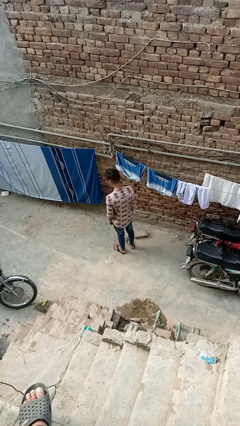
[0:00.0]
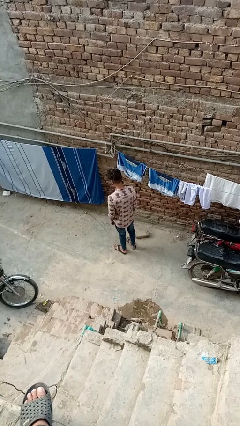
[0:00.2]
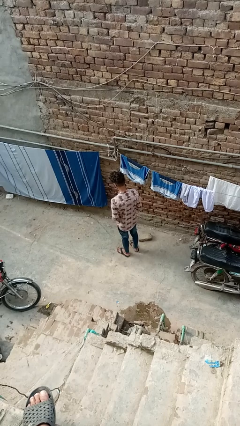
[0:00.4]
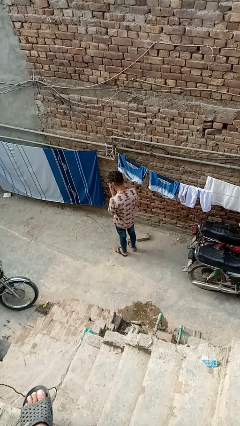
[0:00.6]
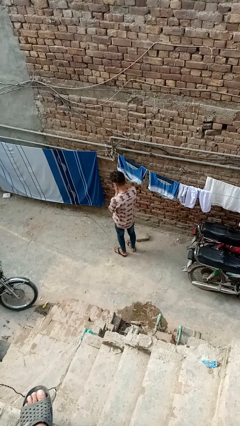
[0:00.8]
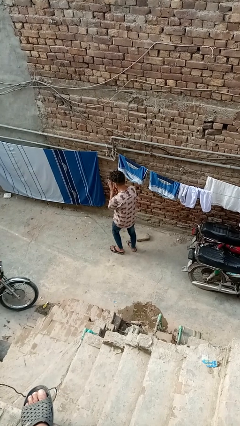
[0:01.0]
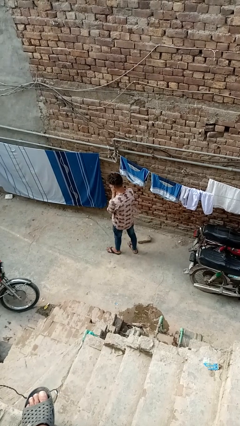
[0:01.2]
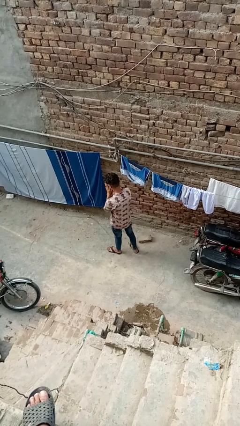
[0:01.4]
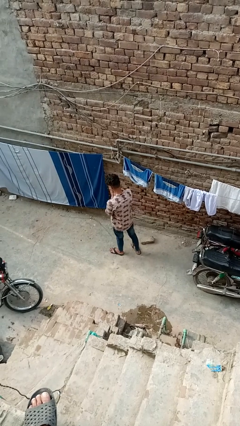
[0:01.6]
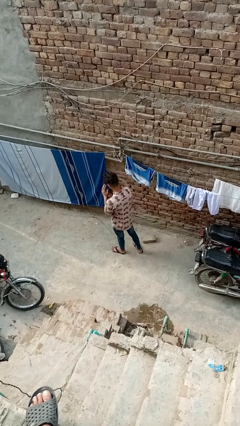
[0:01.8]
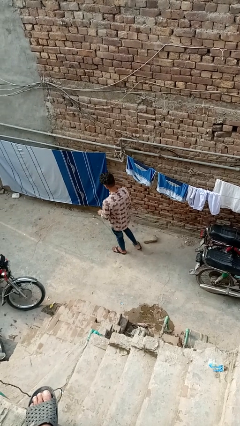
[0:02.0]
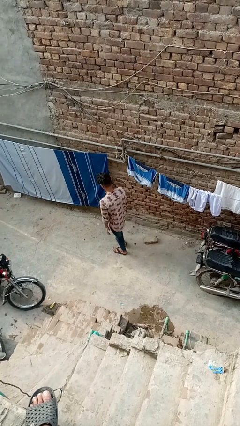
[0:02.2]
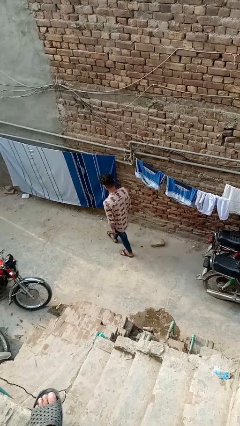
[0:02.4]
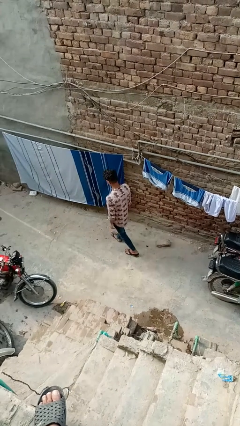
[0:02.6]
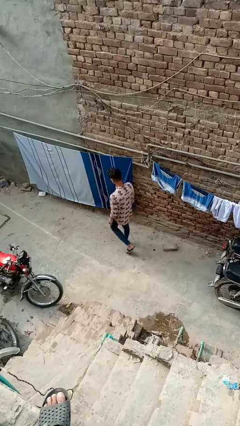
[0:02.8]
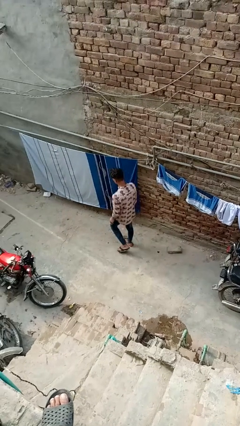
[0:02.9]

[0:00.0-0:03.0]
person blows into hands

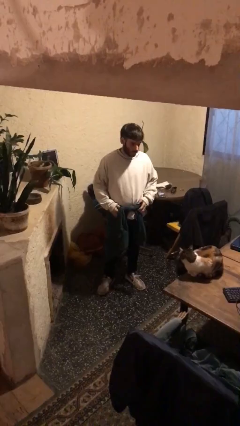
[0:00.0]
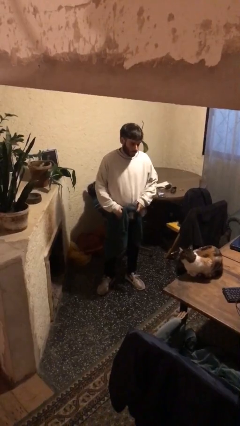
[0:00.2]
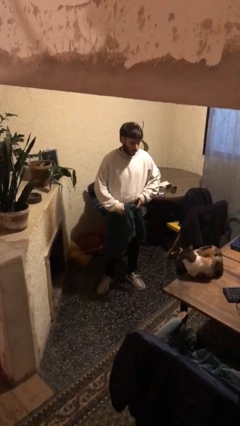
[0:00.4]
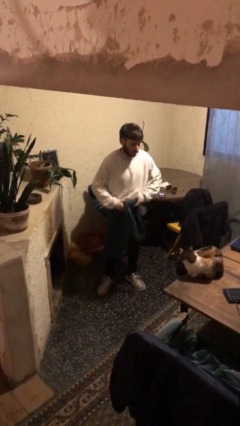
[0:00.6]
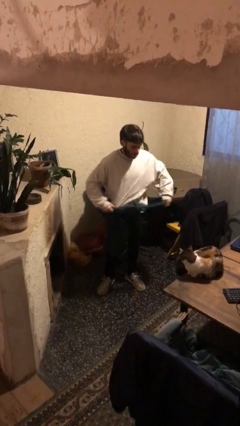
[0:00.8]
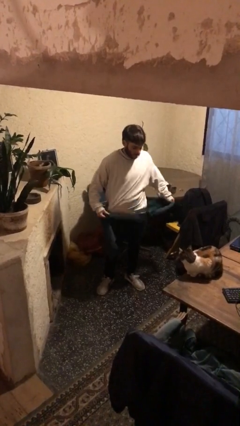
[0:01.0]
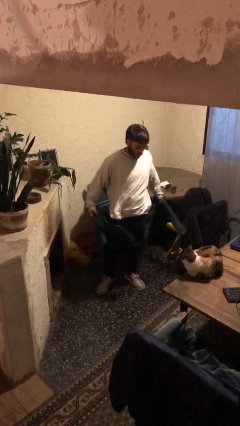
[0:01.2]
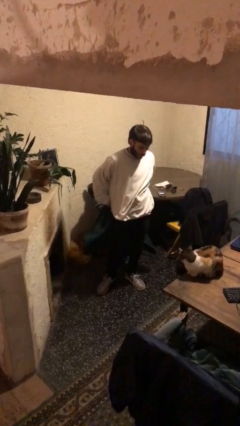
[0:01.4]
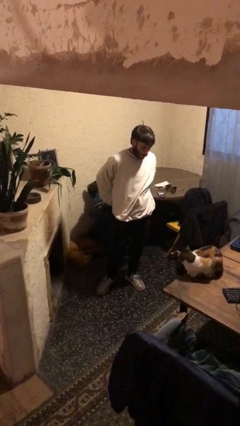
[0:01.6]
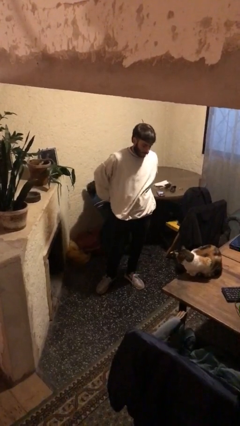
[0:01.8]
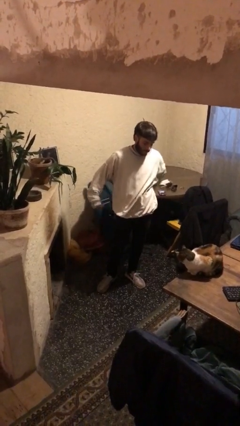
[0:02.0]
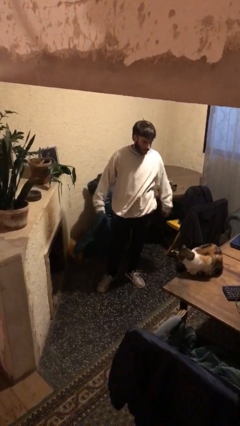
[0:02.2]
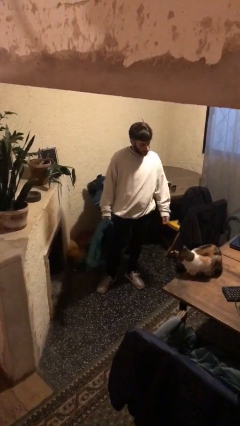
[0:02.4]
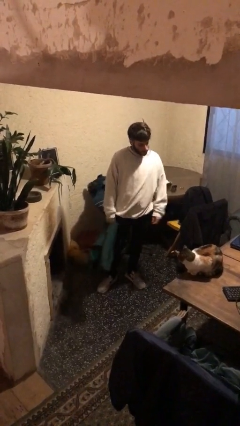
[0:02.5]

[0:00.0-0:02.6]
person unties jacket around waist

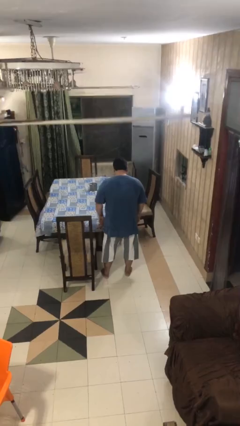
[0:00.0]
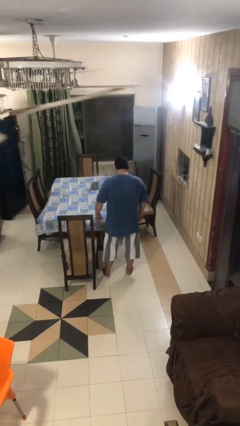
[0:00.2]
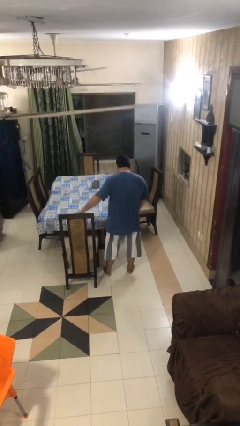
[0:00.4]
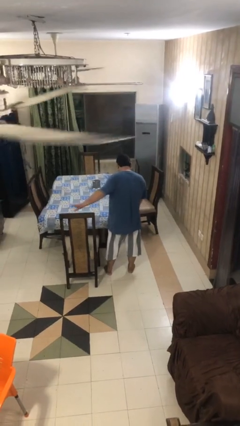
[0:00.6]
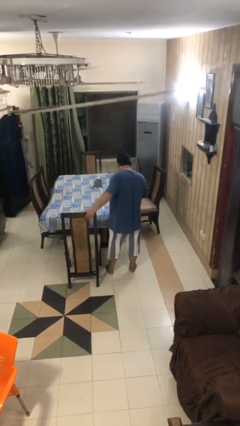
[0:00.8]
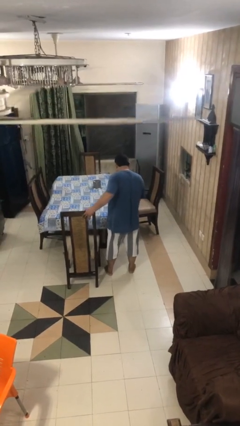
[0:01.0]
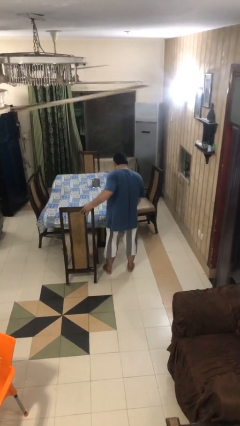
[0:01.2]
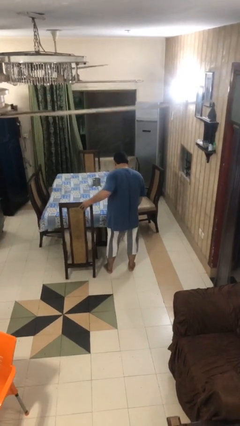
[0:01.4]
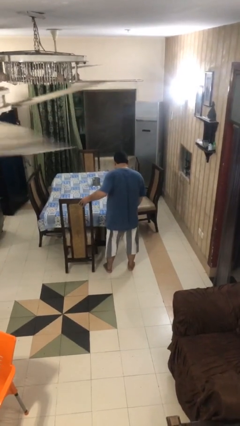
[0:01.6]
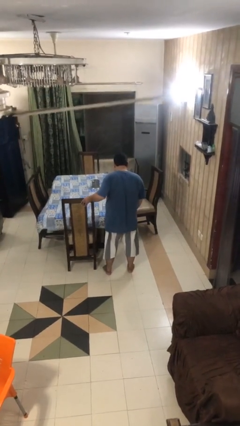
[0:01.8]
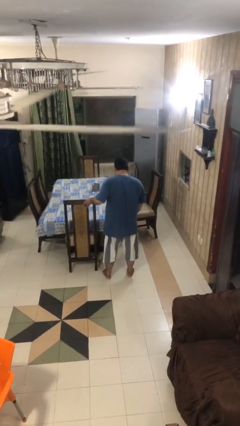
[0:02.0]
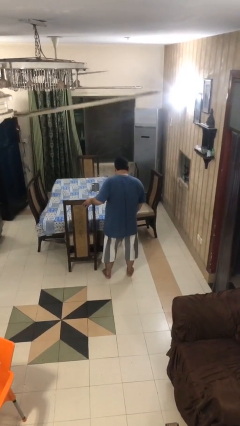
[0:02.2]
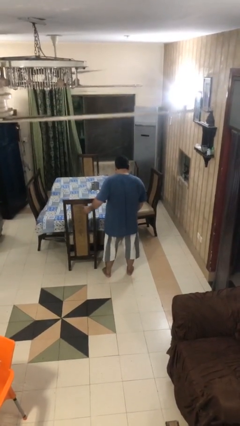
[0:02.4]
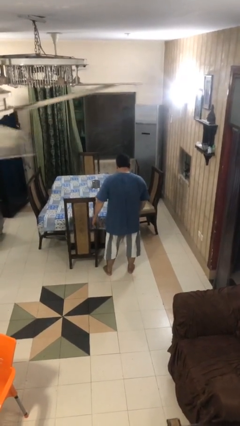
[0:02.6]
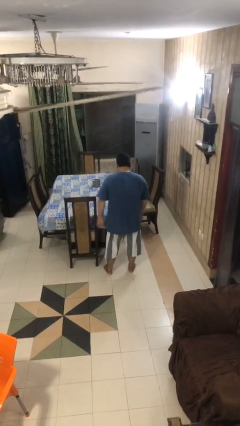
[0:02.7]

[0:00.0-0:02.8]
person pushes in chair

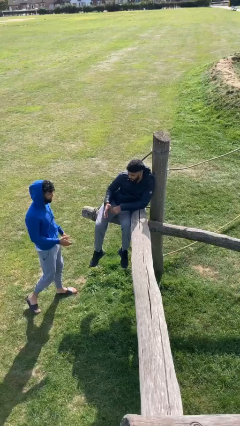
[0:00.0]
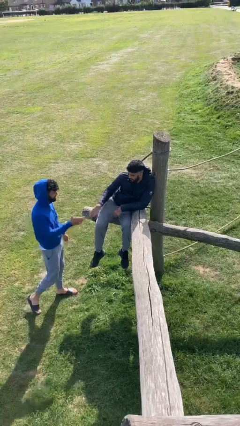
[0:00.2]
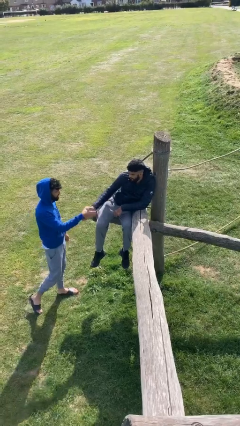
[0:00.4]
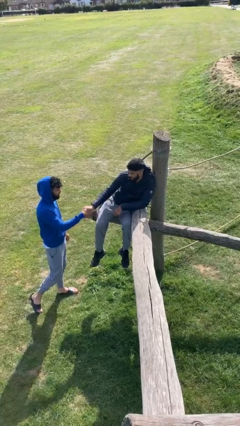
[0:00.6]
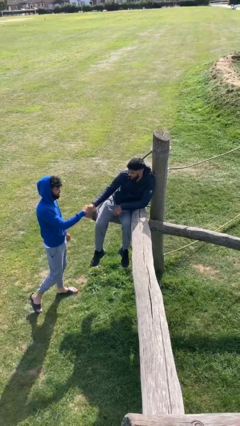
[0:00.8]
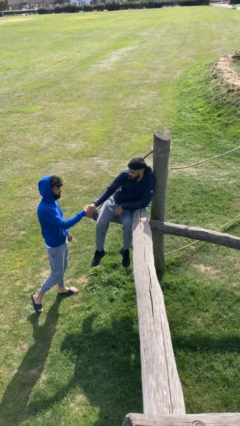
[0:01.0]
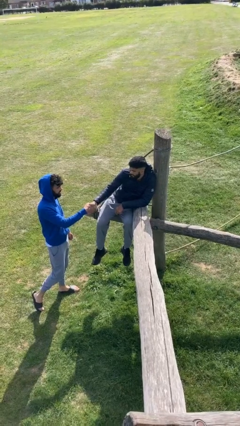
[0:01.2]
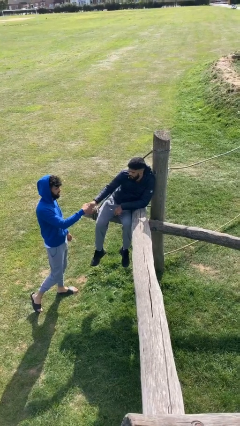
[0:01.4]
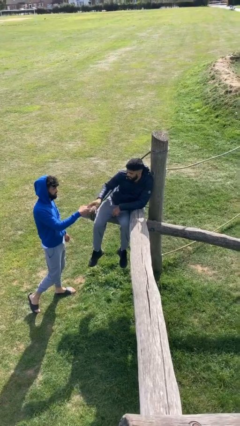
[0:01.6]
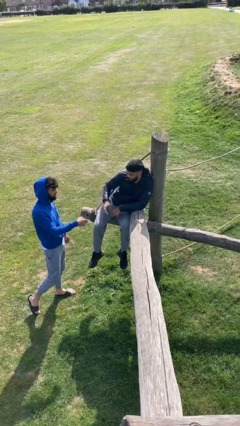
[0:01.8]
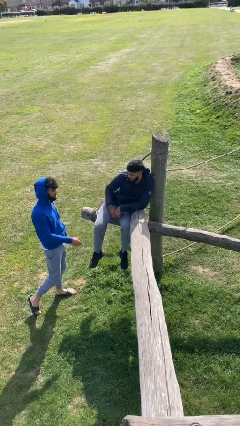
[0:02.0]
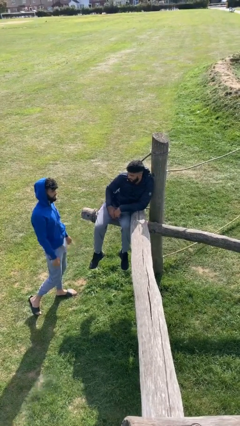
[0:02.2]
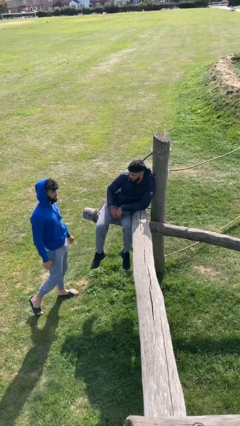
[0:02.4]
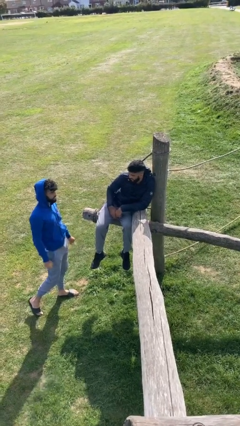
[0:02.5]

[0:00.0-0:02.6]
person shakes hand

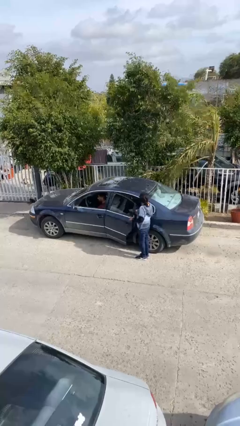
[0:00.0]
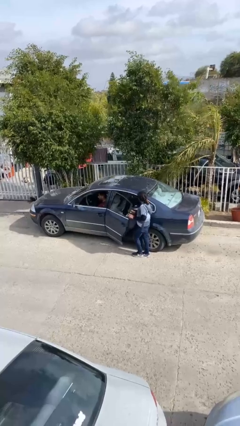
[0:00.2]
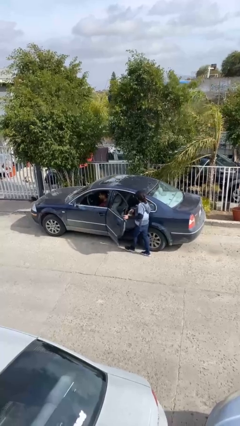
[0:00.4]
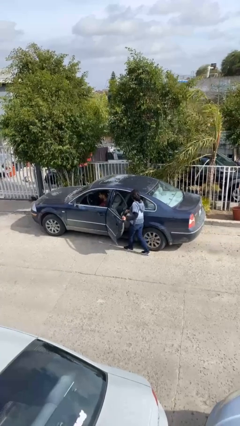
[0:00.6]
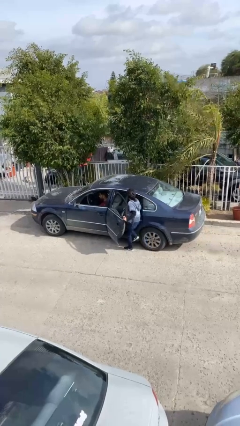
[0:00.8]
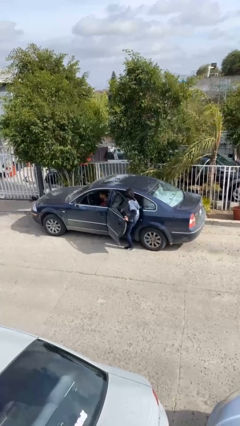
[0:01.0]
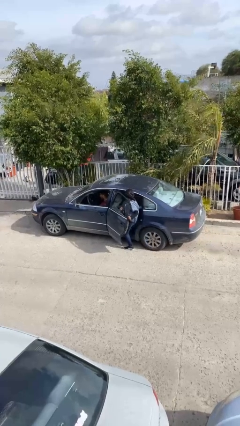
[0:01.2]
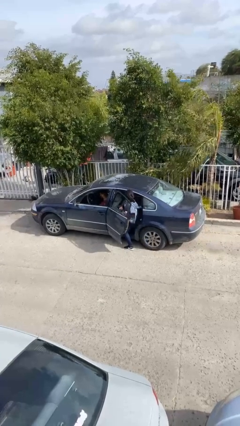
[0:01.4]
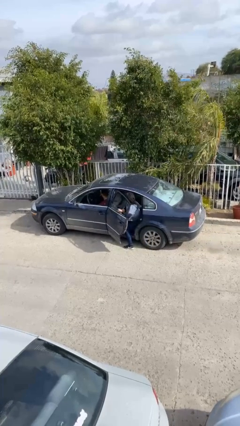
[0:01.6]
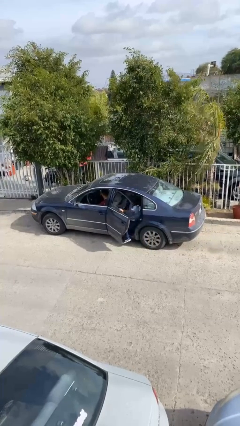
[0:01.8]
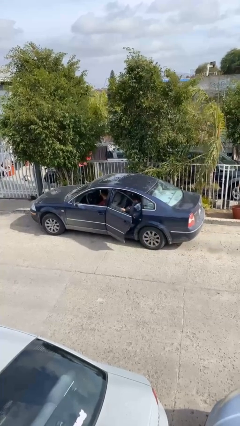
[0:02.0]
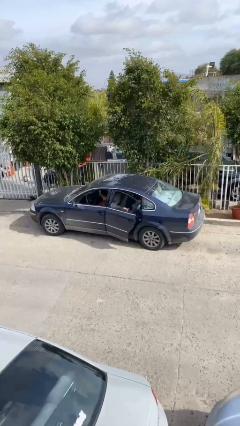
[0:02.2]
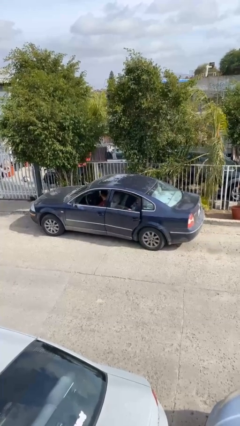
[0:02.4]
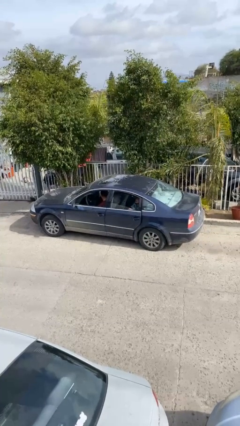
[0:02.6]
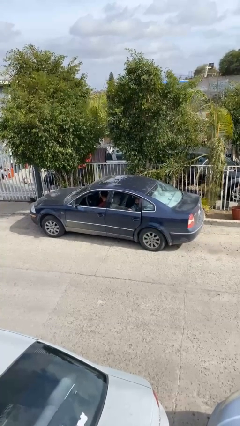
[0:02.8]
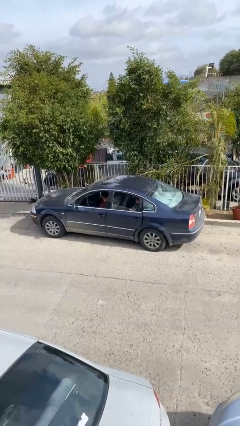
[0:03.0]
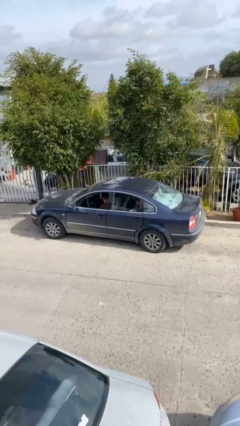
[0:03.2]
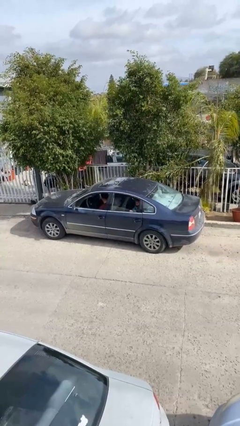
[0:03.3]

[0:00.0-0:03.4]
car picks up person

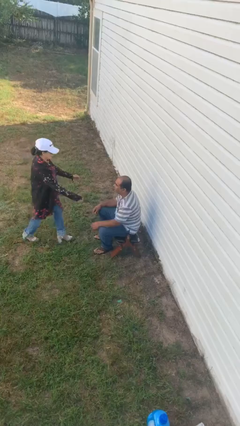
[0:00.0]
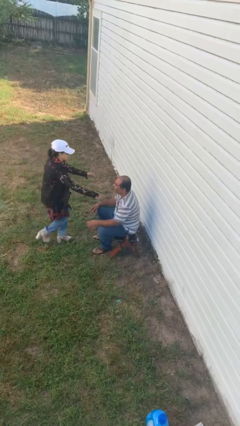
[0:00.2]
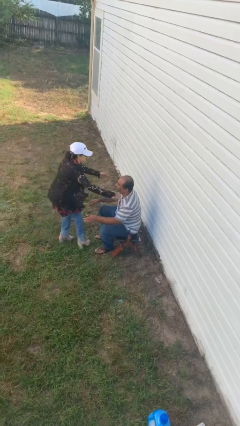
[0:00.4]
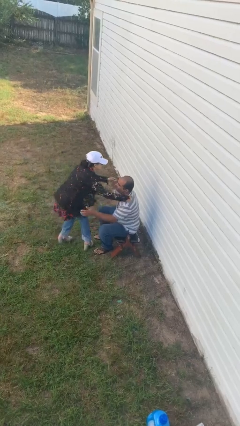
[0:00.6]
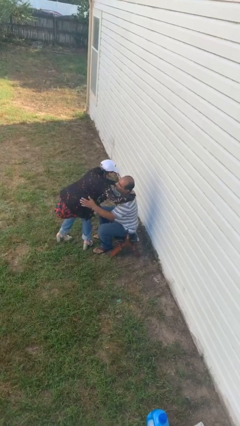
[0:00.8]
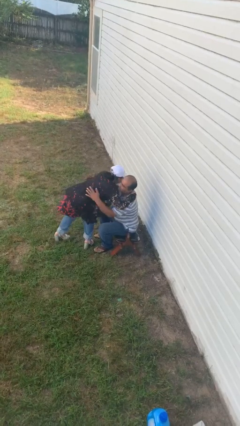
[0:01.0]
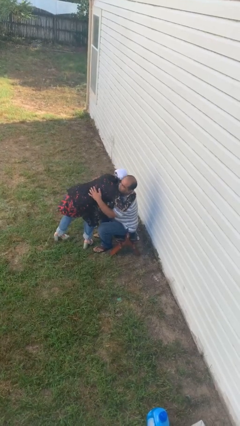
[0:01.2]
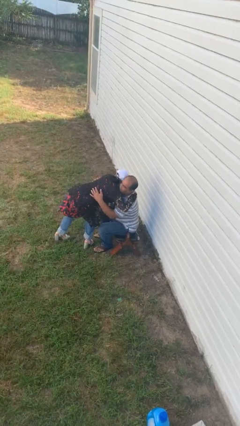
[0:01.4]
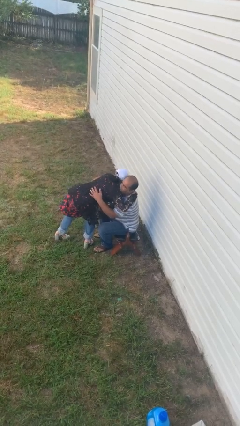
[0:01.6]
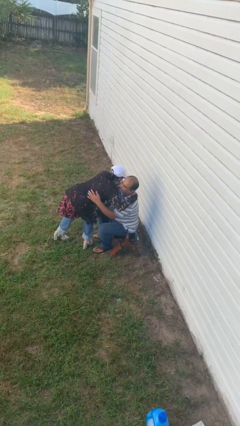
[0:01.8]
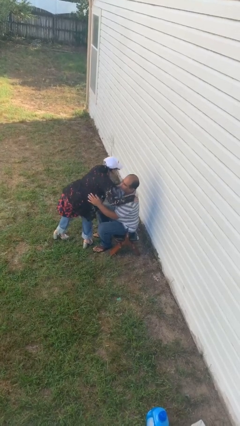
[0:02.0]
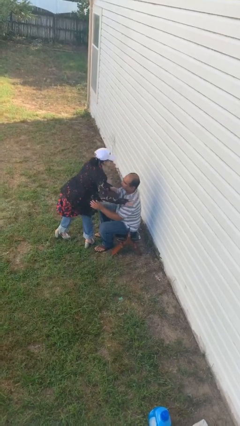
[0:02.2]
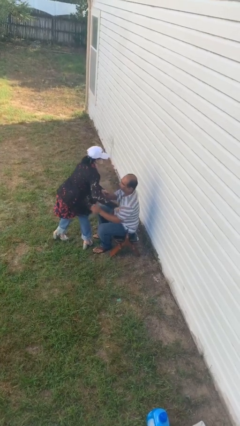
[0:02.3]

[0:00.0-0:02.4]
person embraces person

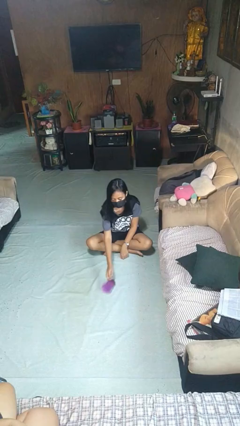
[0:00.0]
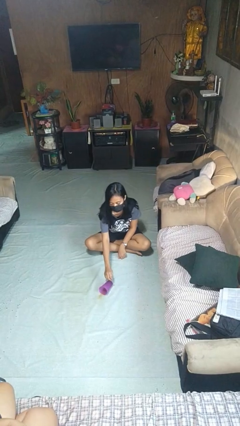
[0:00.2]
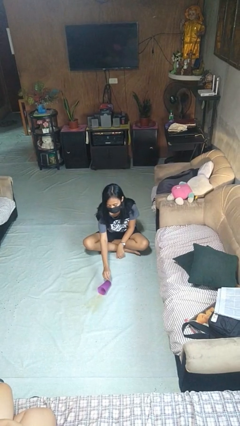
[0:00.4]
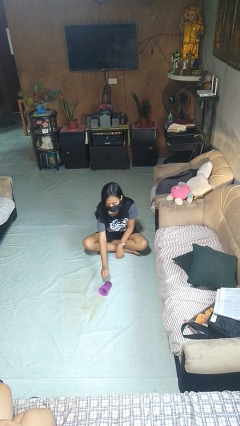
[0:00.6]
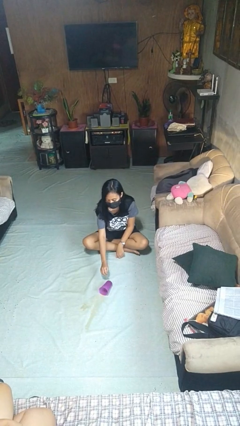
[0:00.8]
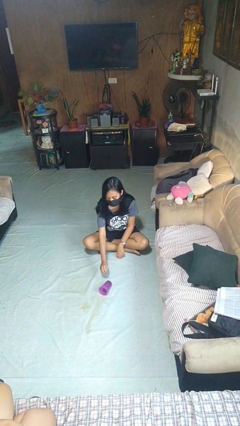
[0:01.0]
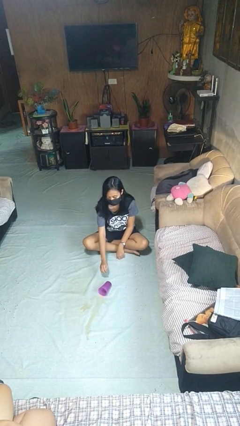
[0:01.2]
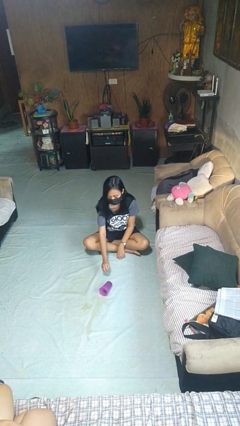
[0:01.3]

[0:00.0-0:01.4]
person spills on floor
